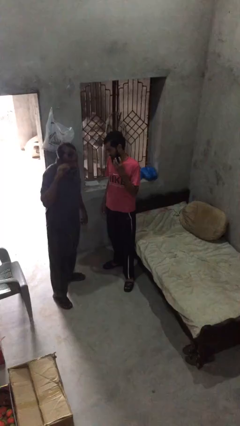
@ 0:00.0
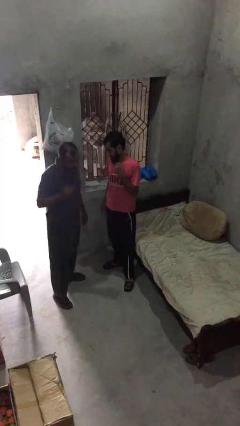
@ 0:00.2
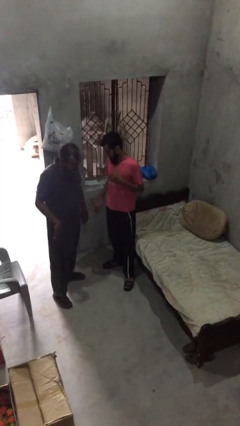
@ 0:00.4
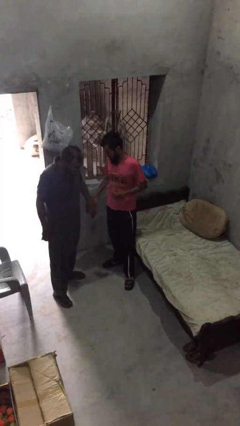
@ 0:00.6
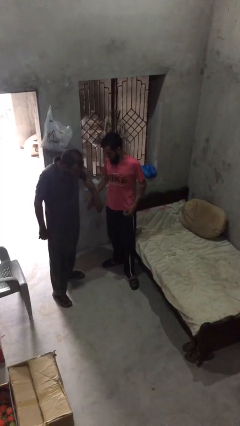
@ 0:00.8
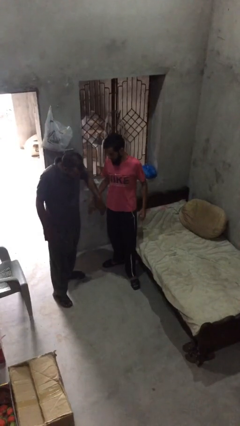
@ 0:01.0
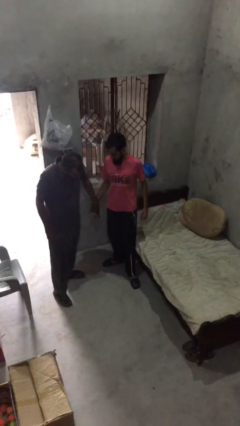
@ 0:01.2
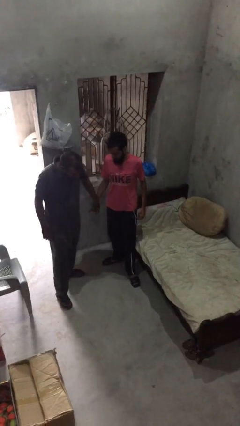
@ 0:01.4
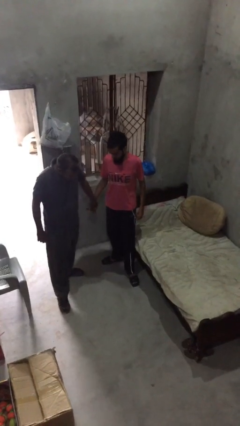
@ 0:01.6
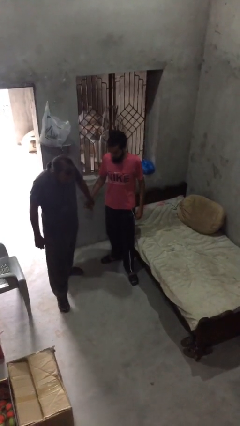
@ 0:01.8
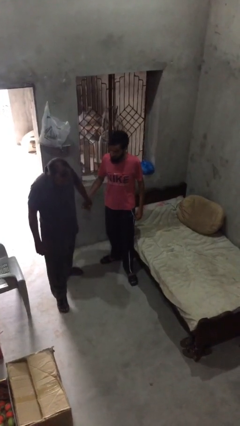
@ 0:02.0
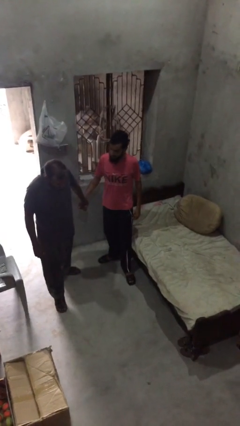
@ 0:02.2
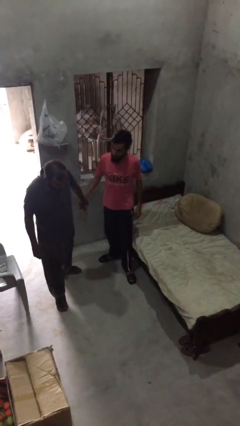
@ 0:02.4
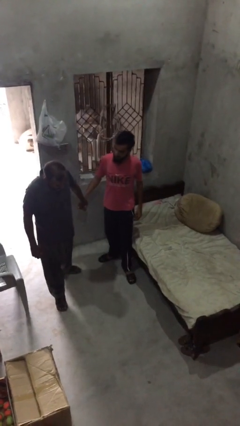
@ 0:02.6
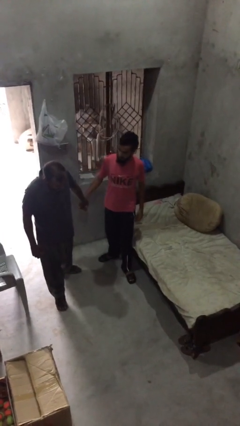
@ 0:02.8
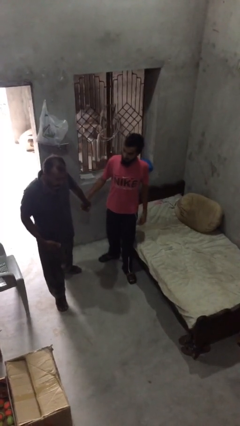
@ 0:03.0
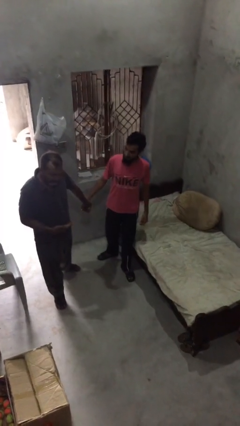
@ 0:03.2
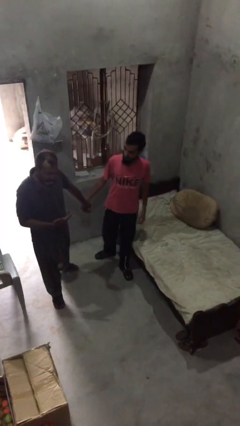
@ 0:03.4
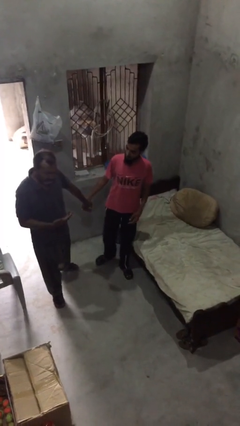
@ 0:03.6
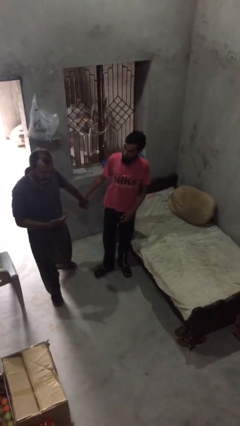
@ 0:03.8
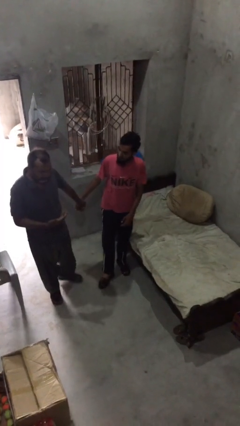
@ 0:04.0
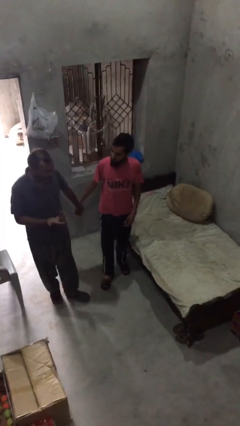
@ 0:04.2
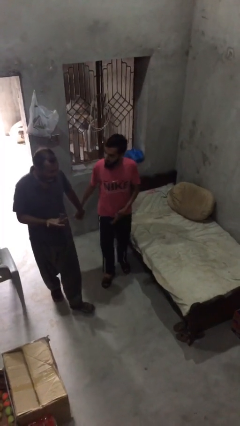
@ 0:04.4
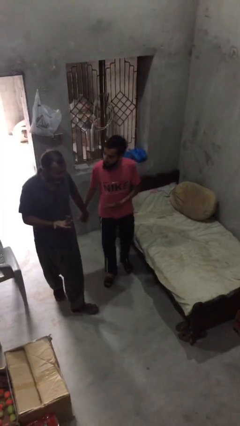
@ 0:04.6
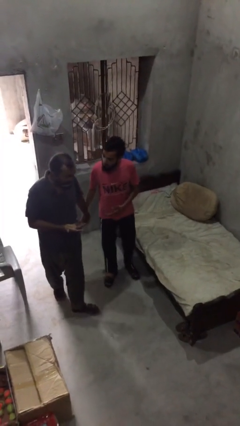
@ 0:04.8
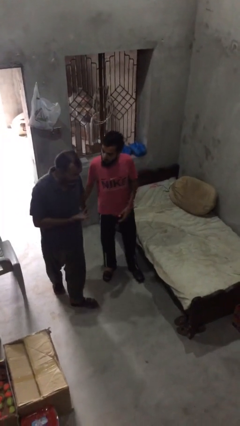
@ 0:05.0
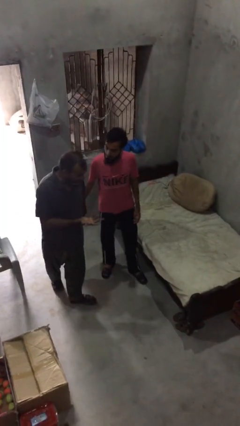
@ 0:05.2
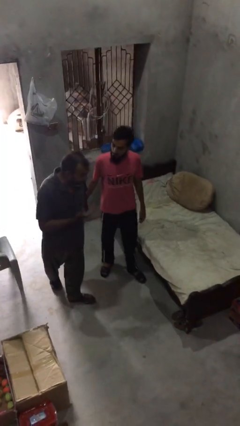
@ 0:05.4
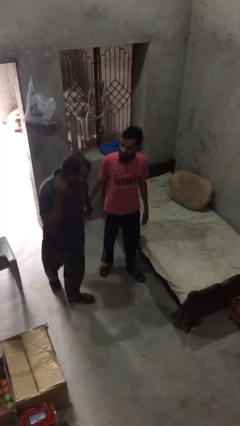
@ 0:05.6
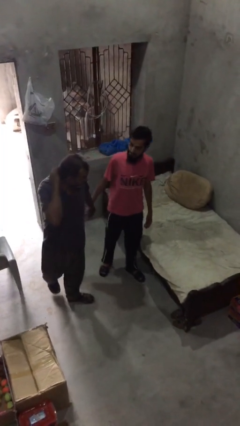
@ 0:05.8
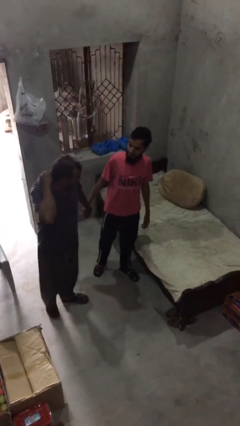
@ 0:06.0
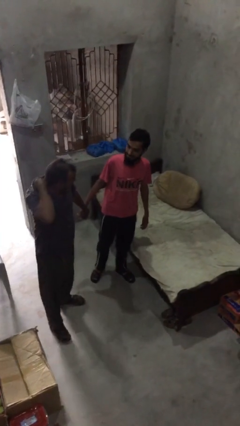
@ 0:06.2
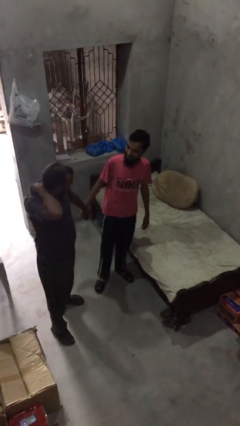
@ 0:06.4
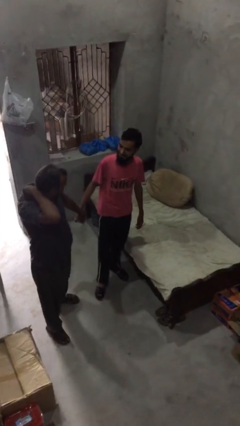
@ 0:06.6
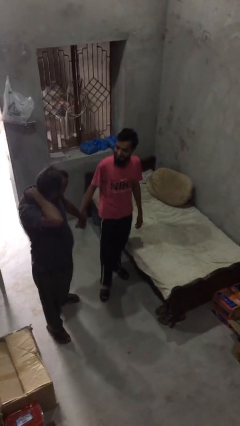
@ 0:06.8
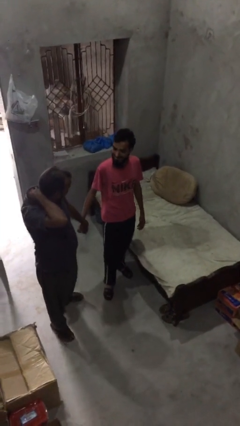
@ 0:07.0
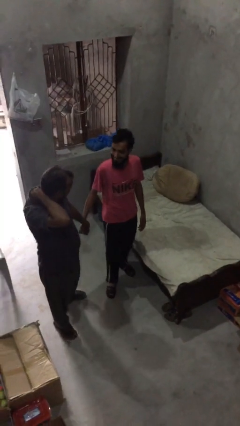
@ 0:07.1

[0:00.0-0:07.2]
person holds hand

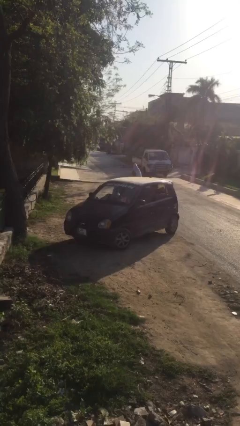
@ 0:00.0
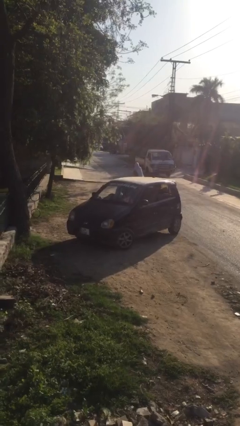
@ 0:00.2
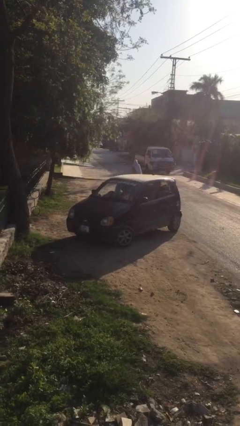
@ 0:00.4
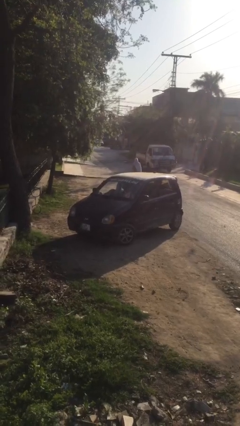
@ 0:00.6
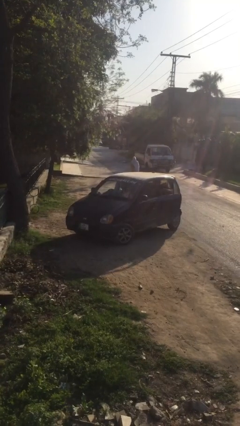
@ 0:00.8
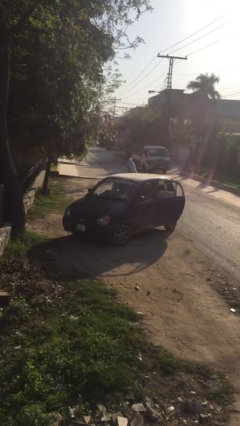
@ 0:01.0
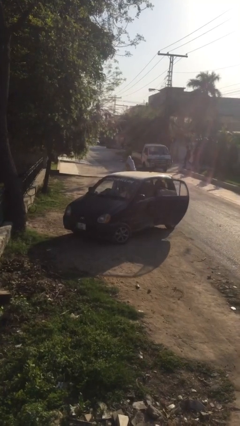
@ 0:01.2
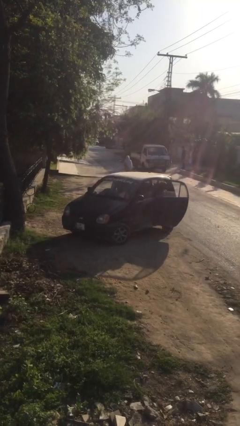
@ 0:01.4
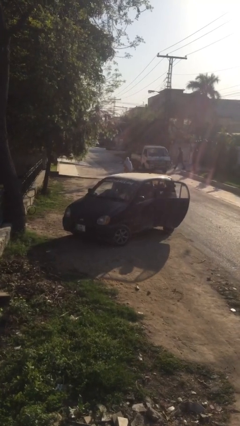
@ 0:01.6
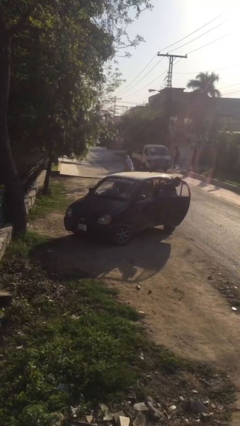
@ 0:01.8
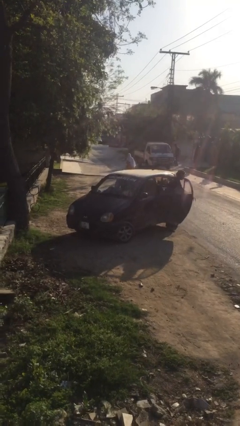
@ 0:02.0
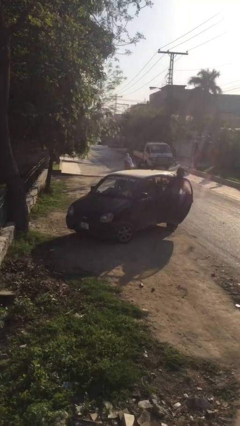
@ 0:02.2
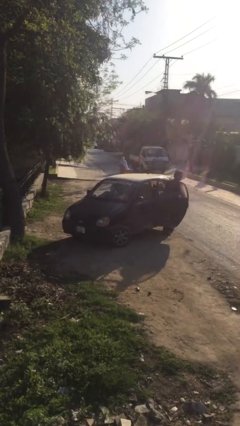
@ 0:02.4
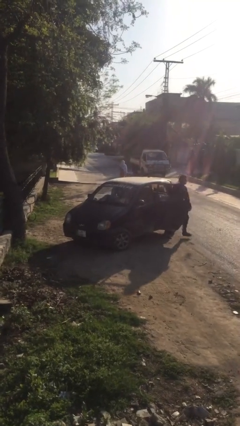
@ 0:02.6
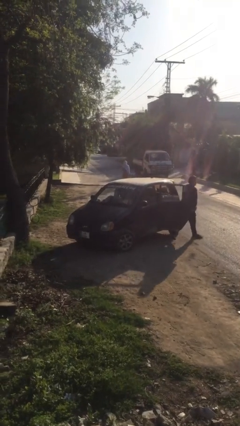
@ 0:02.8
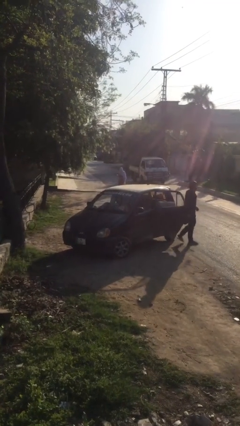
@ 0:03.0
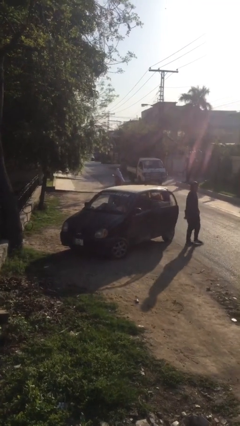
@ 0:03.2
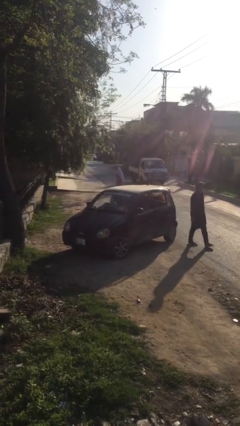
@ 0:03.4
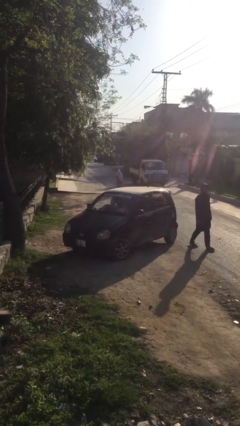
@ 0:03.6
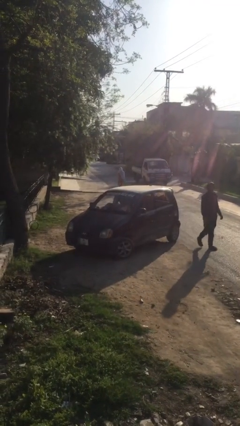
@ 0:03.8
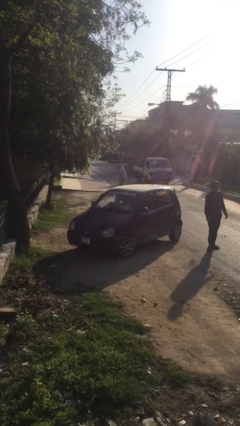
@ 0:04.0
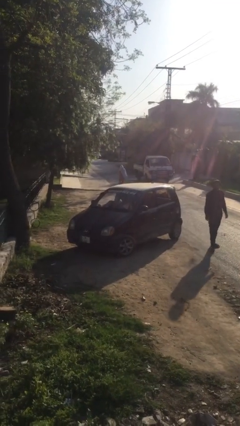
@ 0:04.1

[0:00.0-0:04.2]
car drops off person

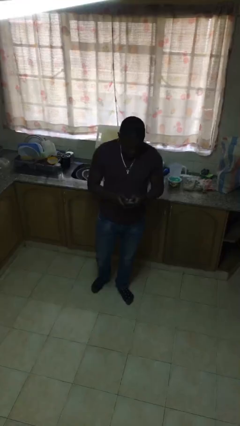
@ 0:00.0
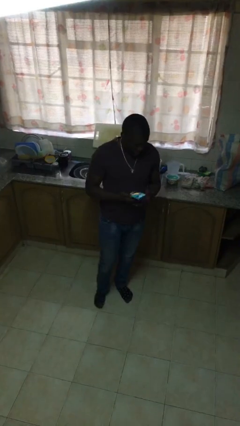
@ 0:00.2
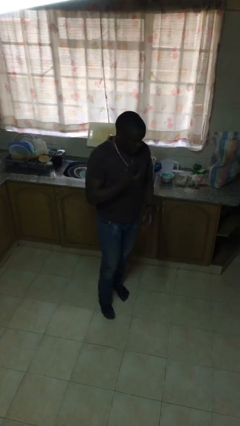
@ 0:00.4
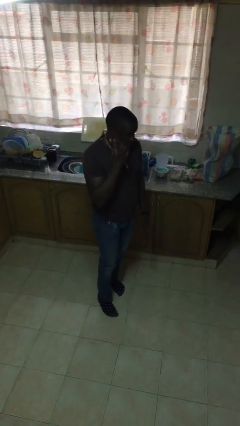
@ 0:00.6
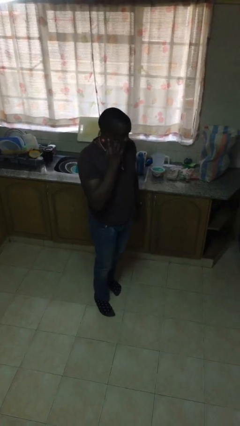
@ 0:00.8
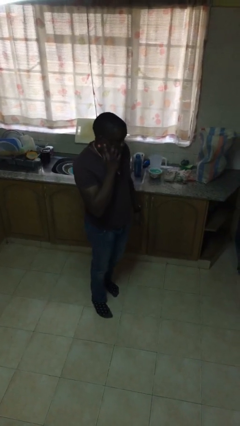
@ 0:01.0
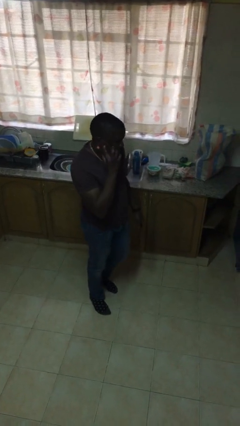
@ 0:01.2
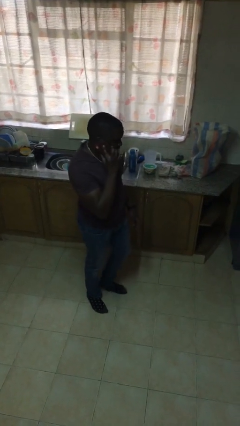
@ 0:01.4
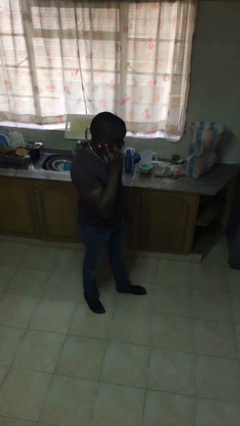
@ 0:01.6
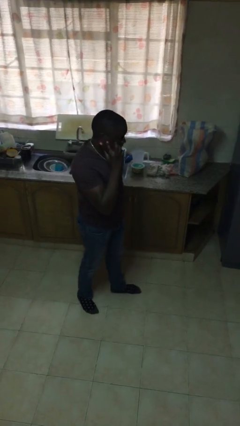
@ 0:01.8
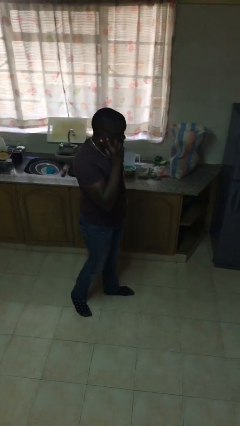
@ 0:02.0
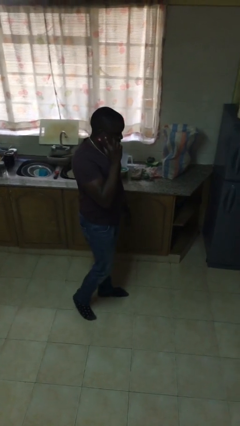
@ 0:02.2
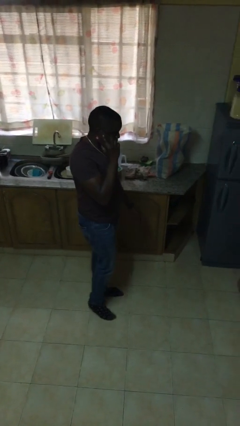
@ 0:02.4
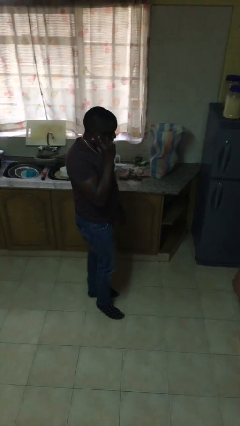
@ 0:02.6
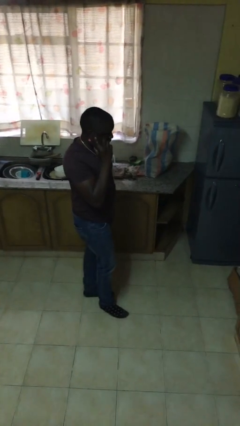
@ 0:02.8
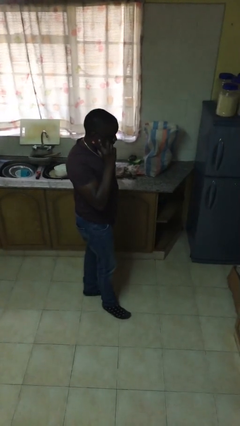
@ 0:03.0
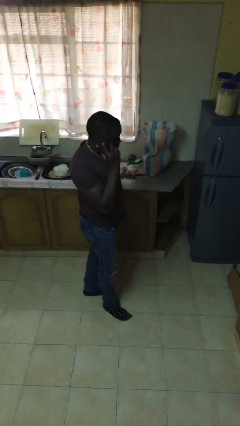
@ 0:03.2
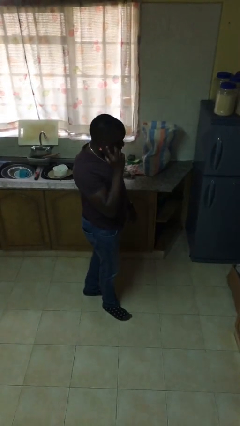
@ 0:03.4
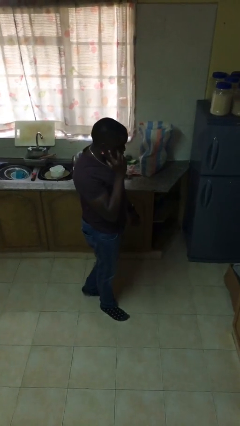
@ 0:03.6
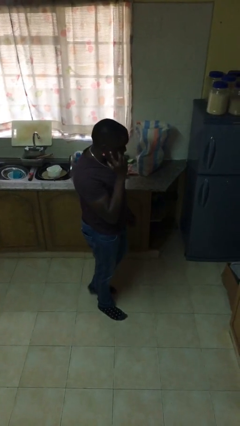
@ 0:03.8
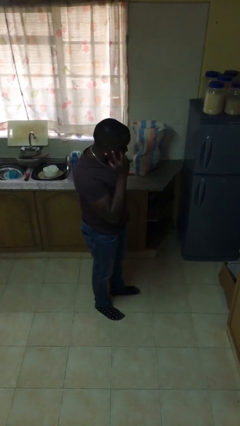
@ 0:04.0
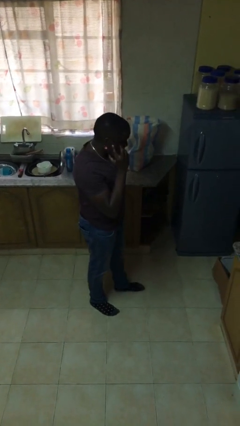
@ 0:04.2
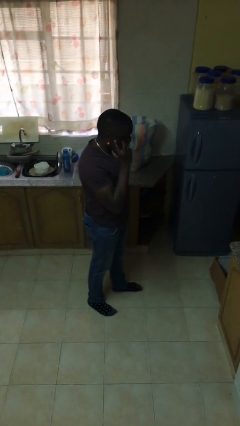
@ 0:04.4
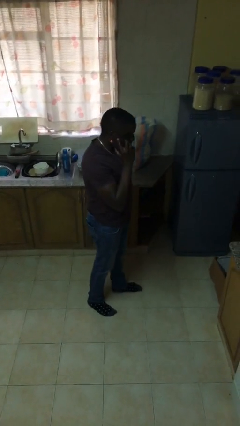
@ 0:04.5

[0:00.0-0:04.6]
person talks on phone

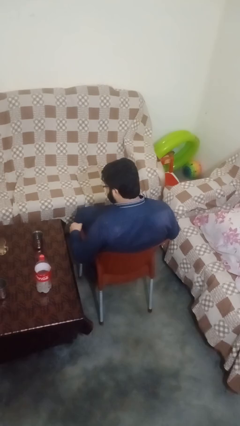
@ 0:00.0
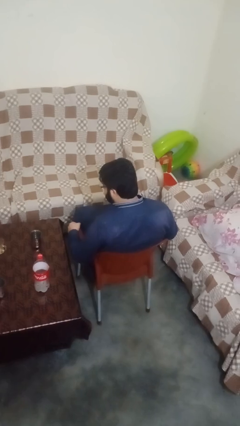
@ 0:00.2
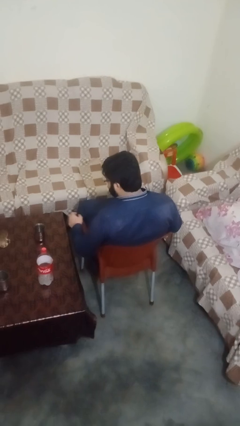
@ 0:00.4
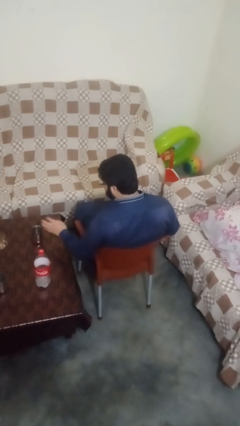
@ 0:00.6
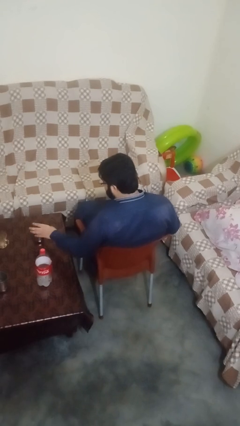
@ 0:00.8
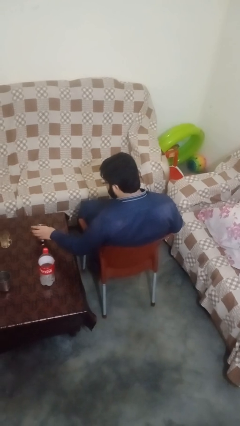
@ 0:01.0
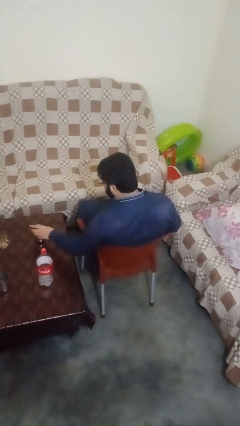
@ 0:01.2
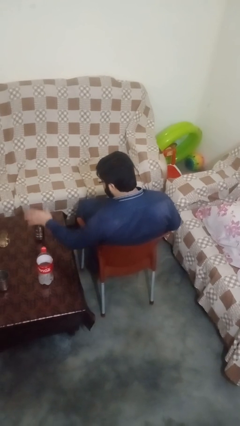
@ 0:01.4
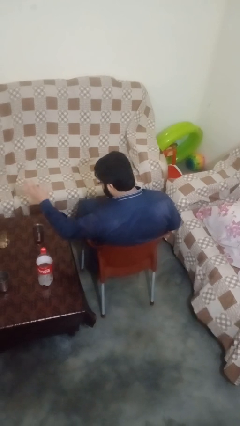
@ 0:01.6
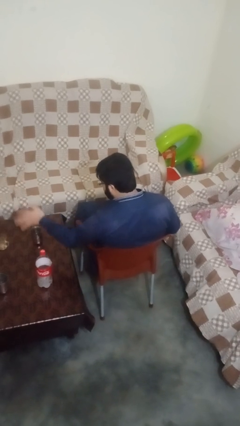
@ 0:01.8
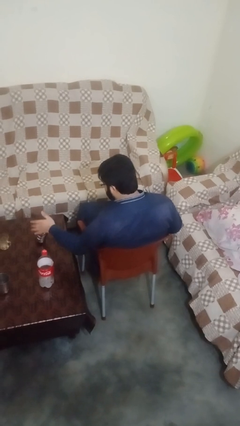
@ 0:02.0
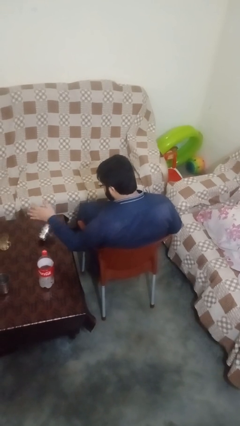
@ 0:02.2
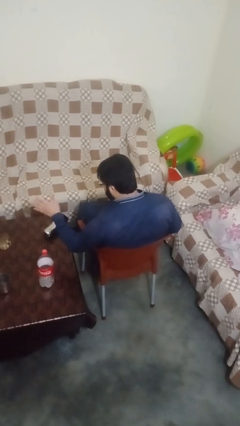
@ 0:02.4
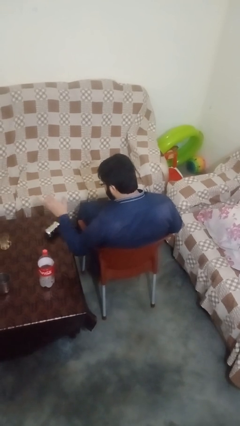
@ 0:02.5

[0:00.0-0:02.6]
person knocks over glass
